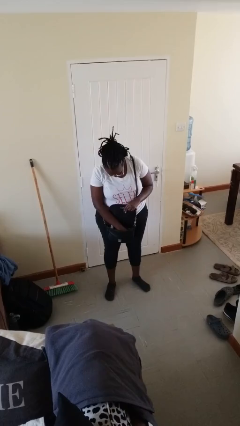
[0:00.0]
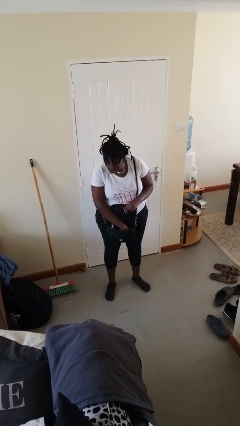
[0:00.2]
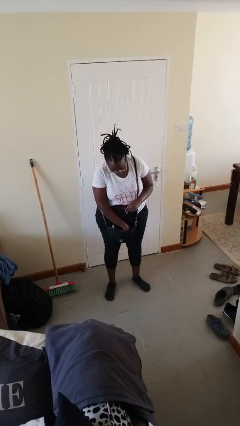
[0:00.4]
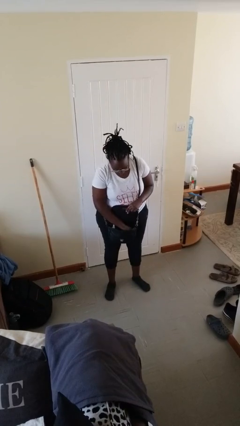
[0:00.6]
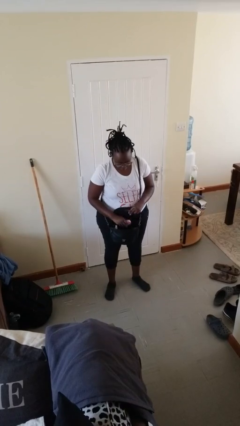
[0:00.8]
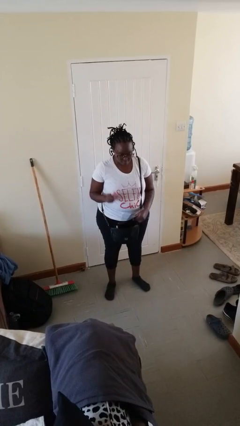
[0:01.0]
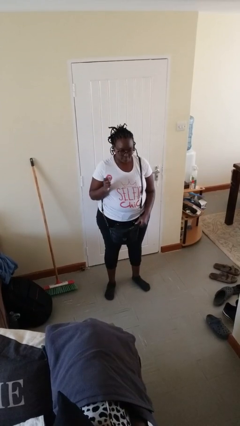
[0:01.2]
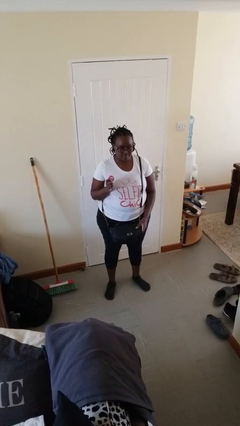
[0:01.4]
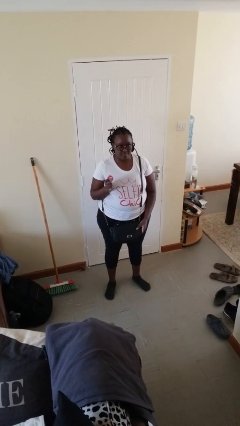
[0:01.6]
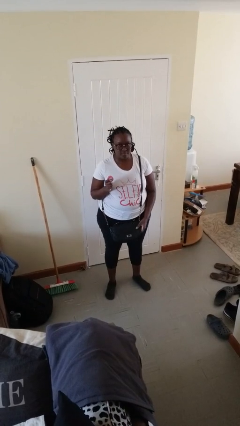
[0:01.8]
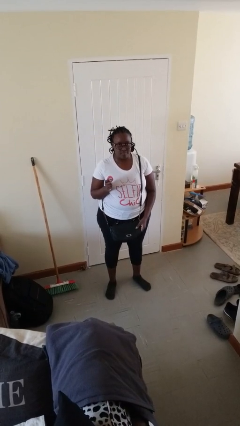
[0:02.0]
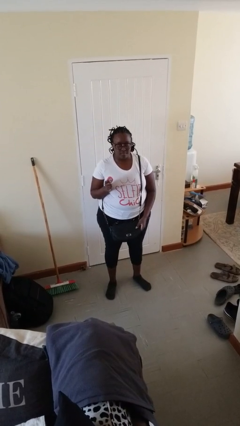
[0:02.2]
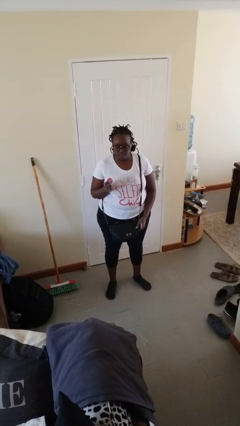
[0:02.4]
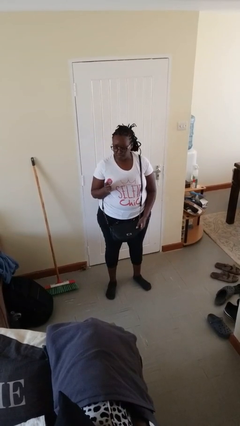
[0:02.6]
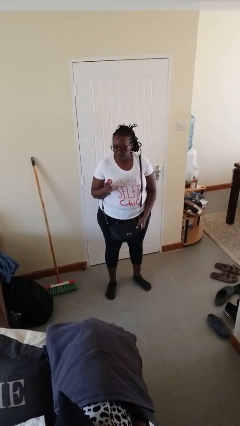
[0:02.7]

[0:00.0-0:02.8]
person takes object from purse

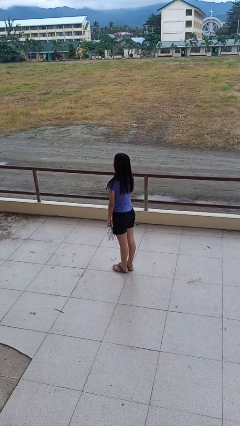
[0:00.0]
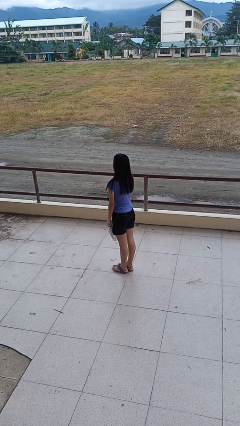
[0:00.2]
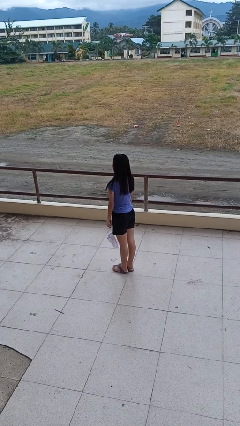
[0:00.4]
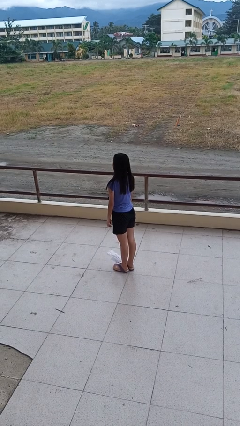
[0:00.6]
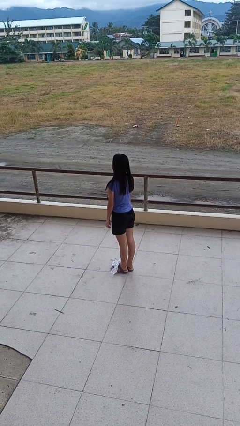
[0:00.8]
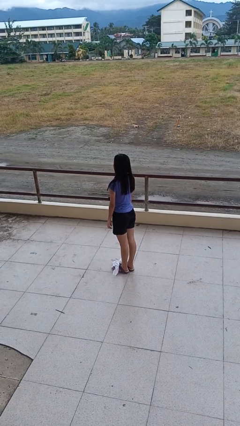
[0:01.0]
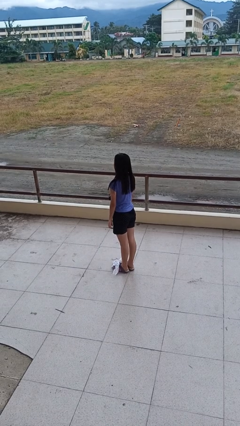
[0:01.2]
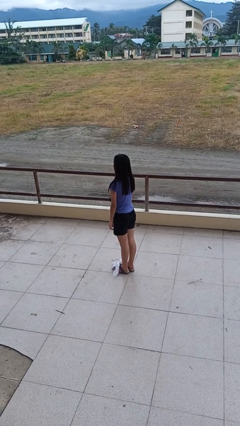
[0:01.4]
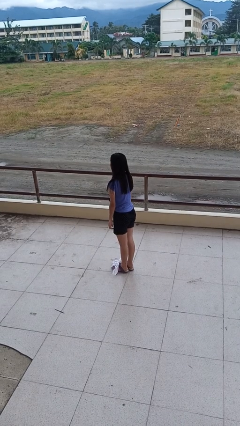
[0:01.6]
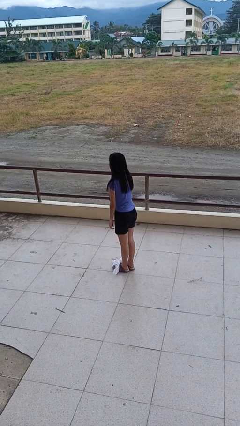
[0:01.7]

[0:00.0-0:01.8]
person drops object

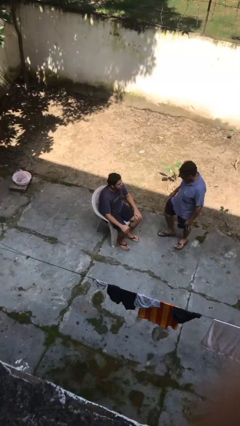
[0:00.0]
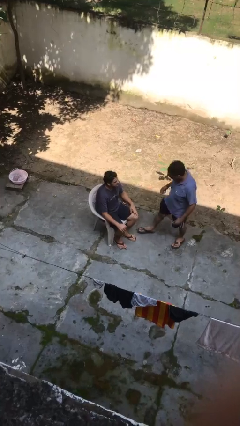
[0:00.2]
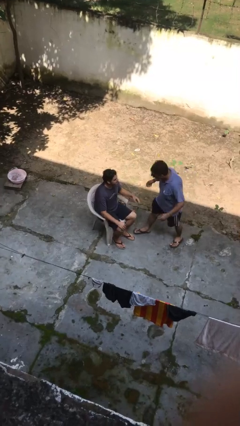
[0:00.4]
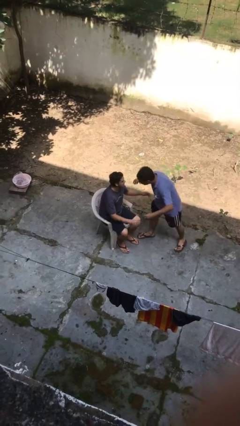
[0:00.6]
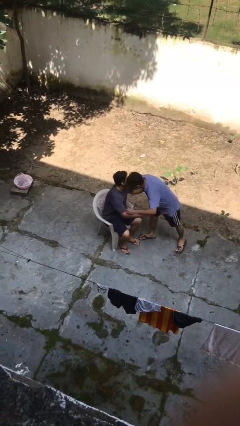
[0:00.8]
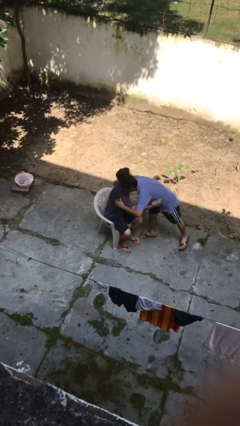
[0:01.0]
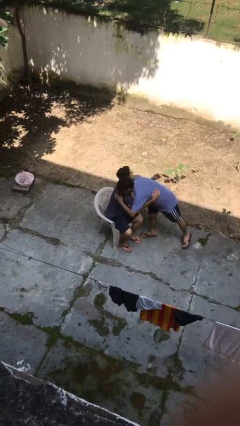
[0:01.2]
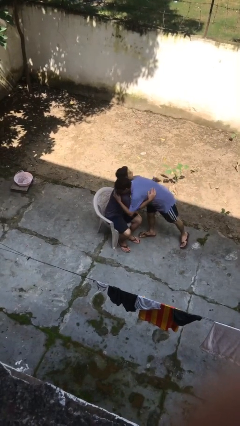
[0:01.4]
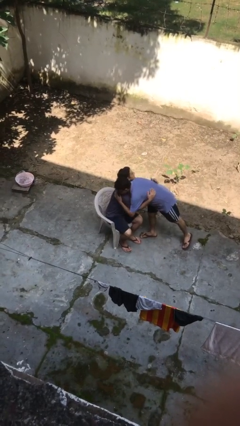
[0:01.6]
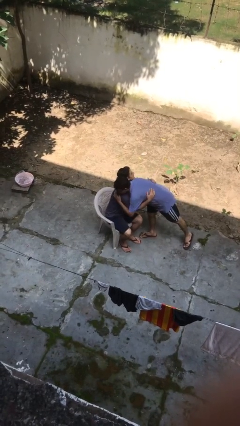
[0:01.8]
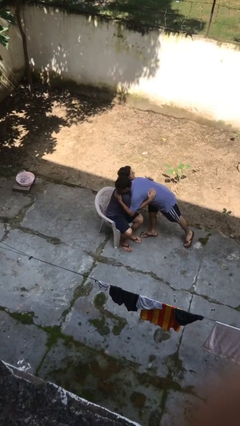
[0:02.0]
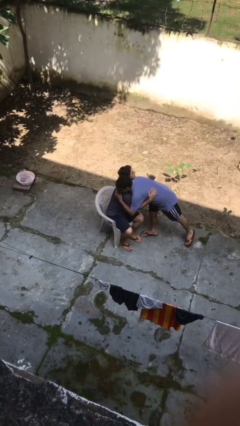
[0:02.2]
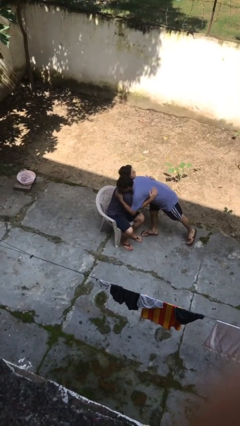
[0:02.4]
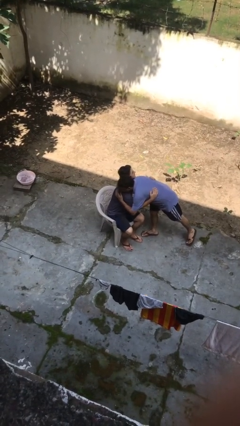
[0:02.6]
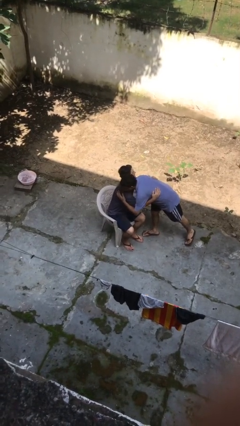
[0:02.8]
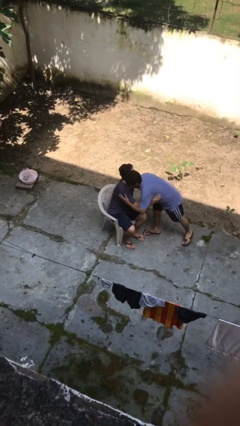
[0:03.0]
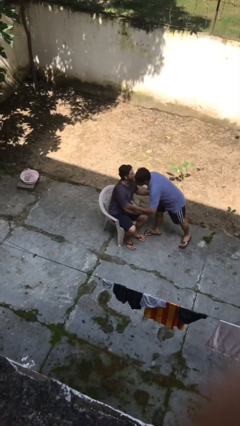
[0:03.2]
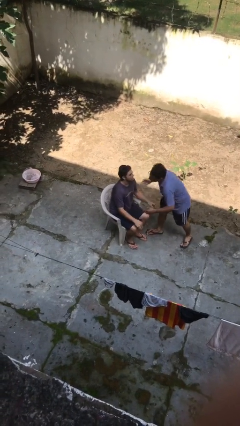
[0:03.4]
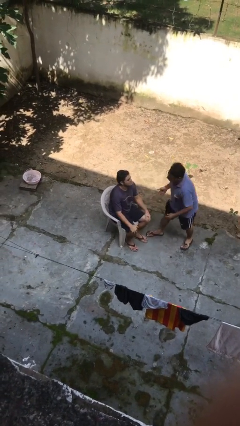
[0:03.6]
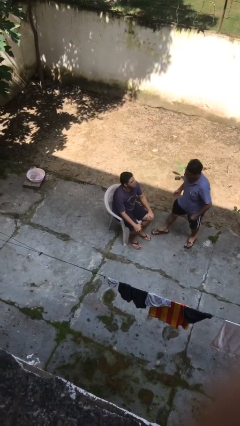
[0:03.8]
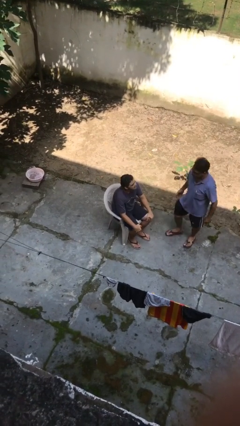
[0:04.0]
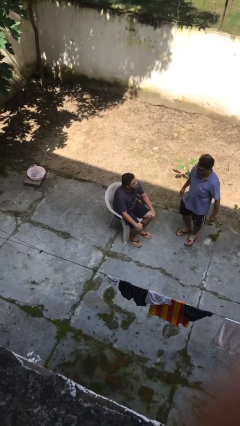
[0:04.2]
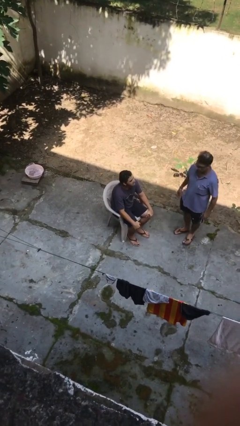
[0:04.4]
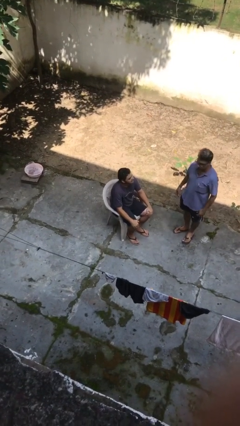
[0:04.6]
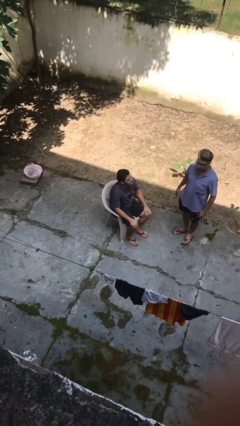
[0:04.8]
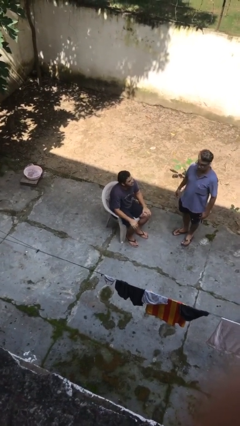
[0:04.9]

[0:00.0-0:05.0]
person embraces person

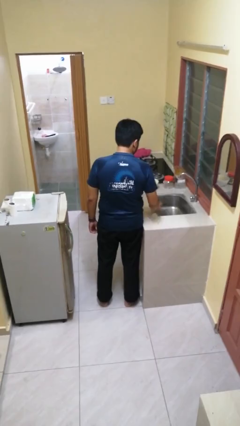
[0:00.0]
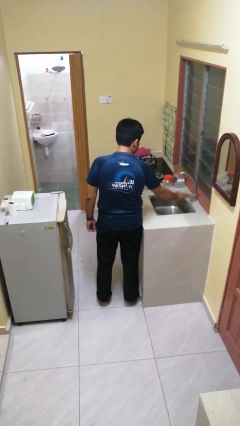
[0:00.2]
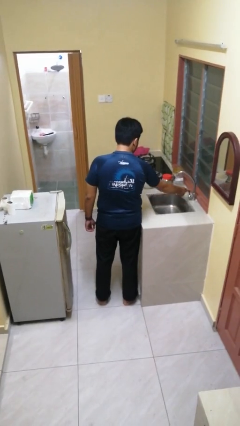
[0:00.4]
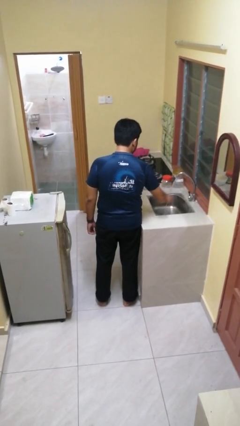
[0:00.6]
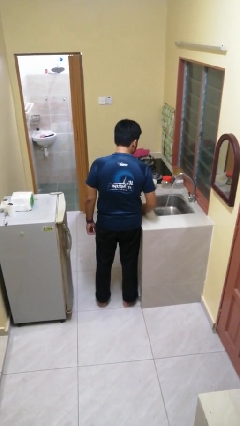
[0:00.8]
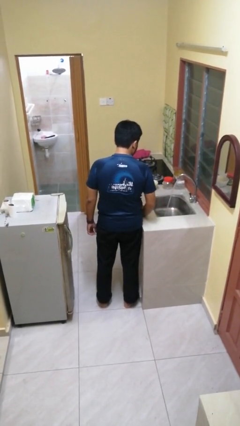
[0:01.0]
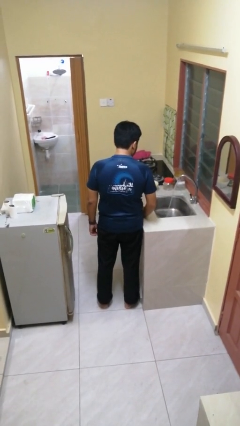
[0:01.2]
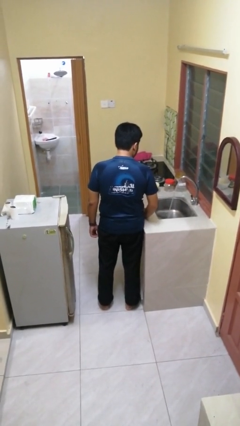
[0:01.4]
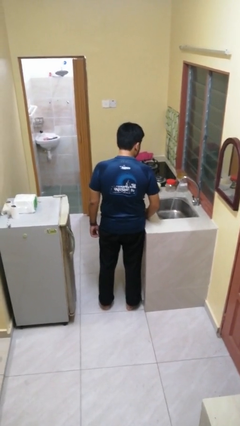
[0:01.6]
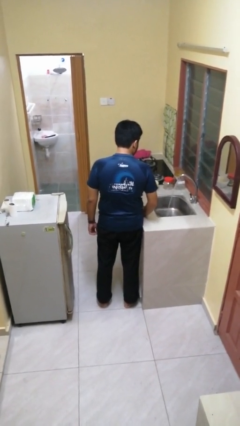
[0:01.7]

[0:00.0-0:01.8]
person turns on faucet

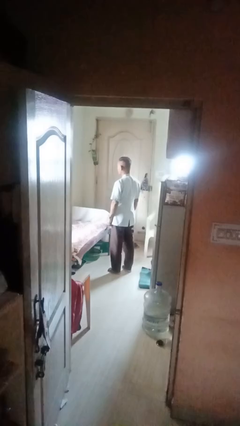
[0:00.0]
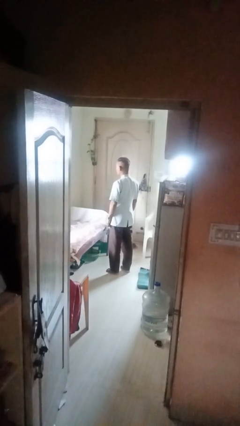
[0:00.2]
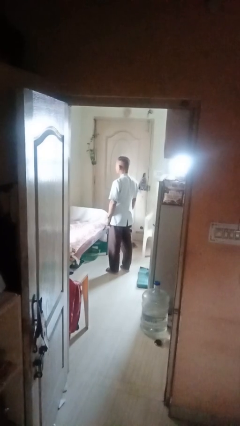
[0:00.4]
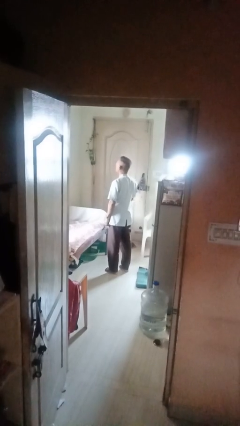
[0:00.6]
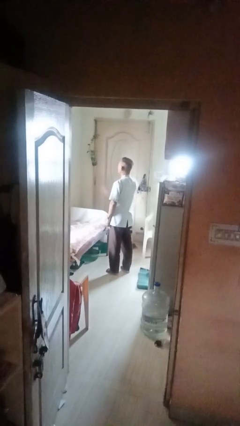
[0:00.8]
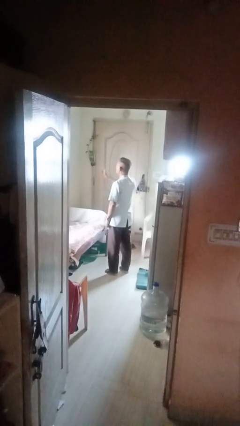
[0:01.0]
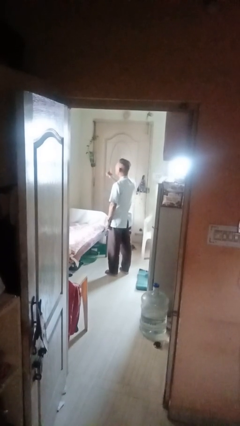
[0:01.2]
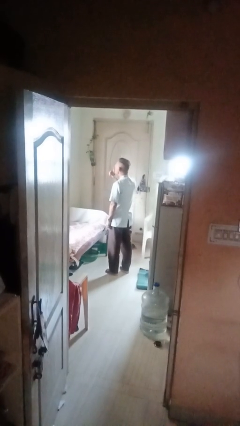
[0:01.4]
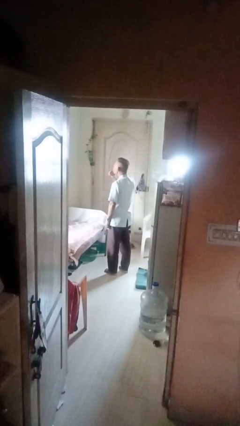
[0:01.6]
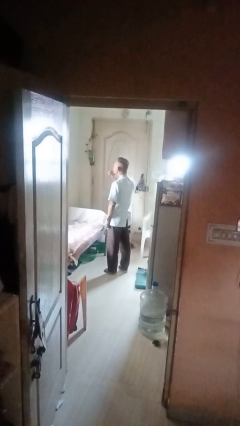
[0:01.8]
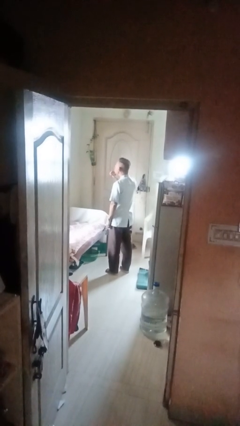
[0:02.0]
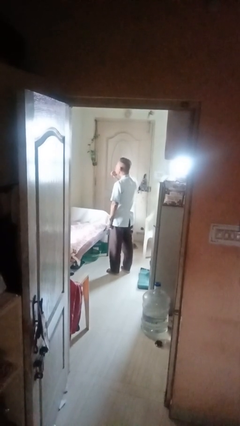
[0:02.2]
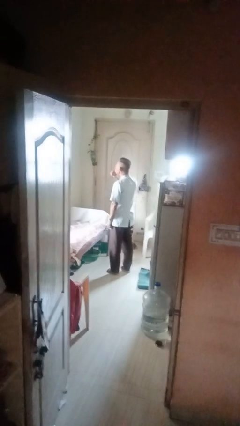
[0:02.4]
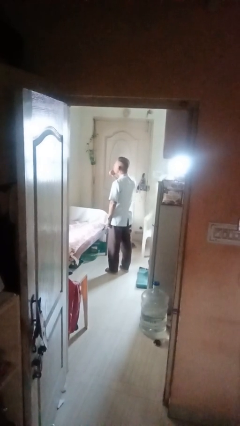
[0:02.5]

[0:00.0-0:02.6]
person gestures be quiet

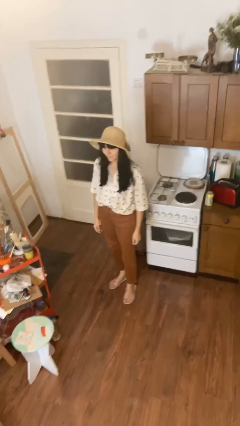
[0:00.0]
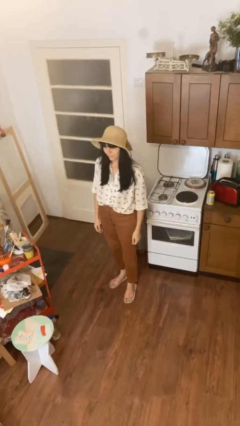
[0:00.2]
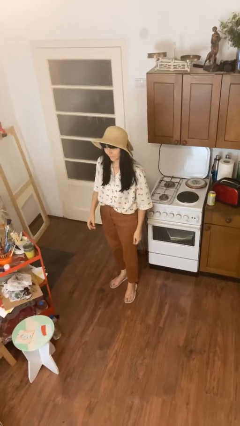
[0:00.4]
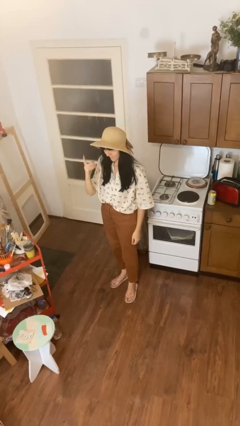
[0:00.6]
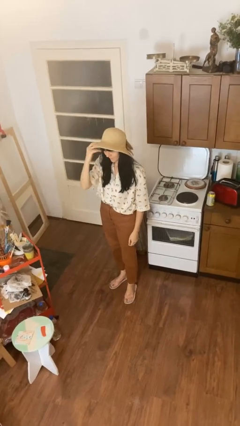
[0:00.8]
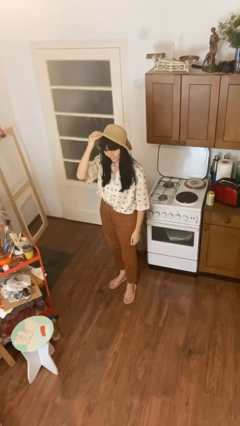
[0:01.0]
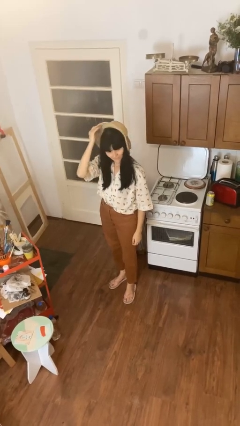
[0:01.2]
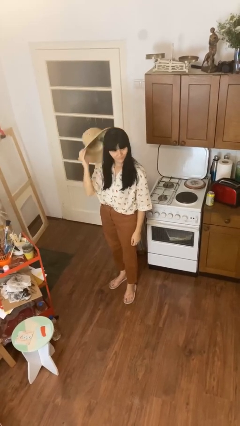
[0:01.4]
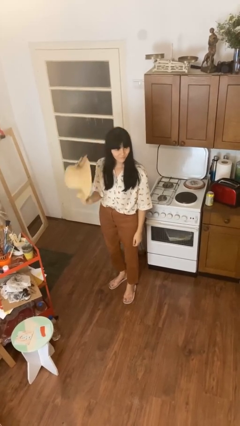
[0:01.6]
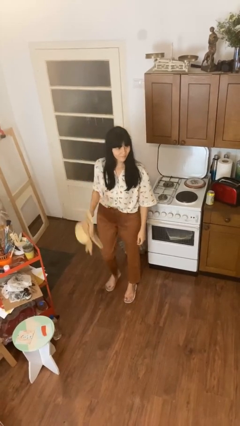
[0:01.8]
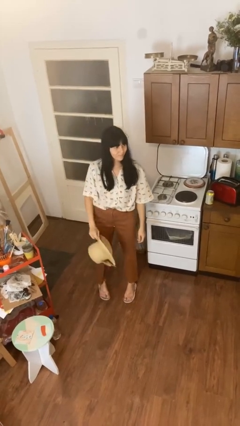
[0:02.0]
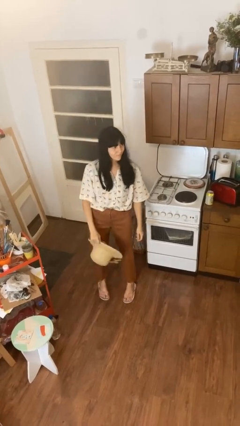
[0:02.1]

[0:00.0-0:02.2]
person takes off hat

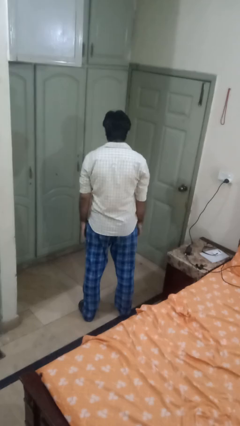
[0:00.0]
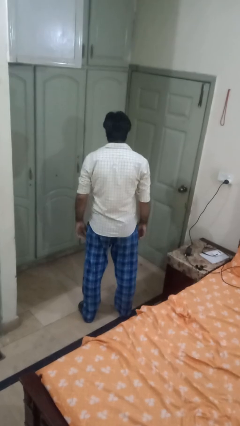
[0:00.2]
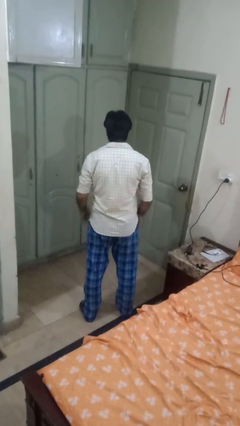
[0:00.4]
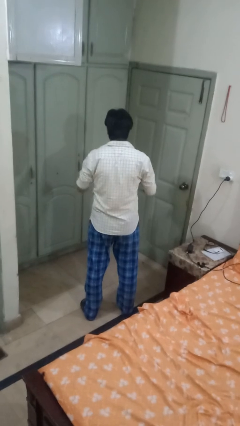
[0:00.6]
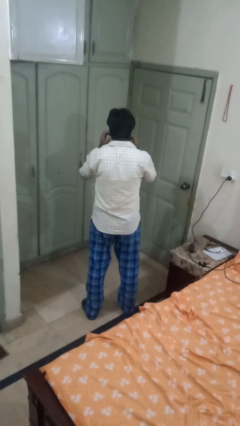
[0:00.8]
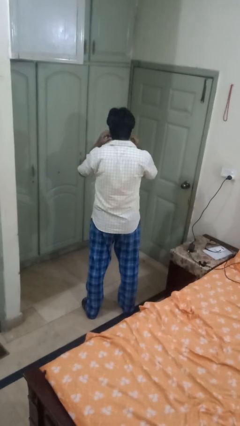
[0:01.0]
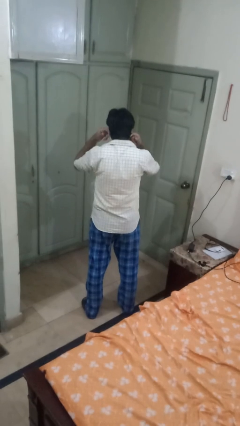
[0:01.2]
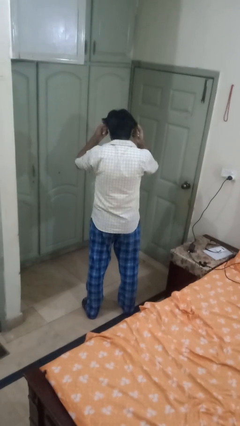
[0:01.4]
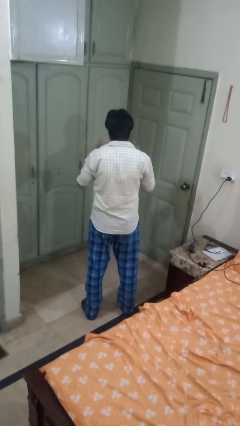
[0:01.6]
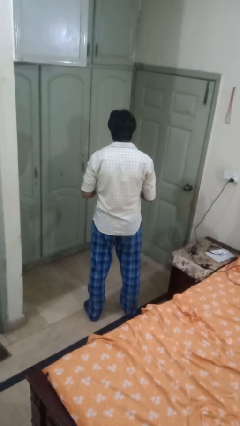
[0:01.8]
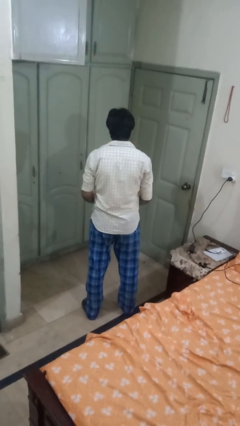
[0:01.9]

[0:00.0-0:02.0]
person takes off facemask
